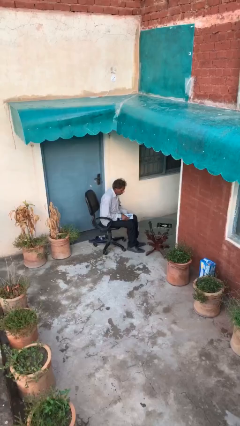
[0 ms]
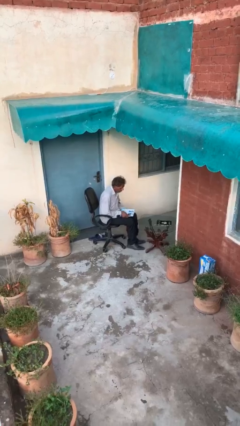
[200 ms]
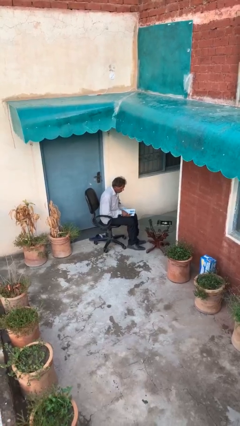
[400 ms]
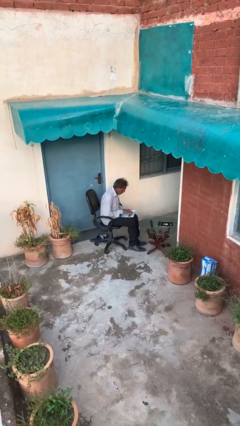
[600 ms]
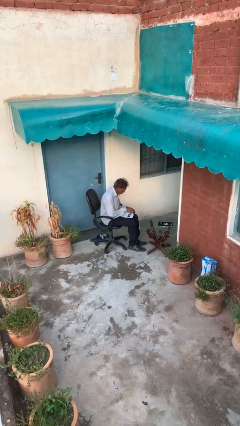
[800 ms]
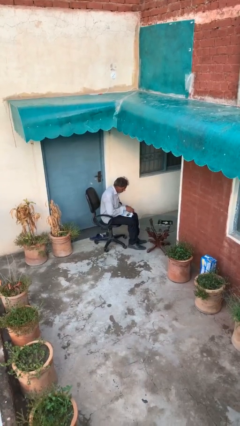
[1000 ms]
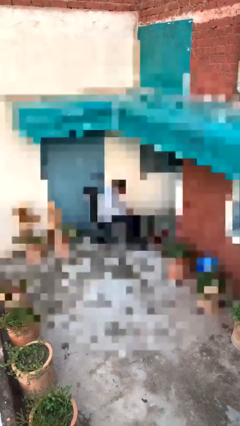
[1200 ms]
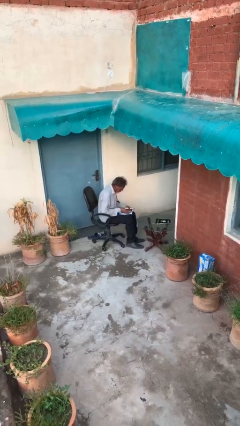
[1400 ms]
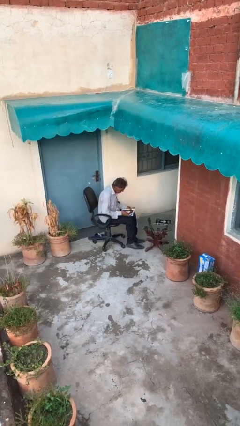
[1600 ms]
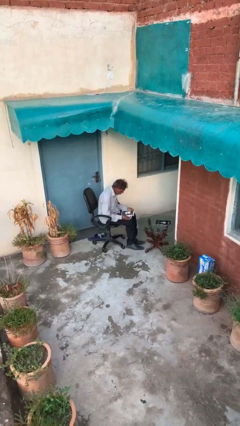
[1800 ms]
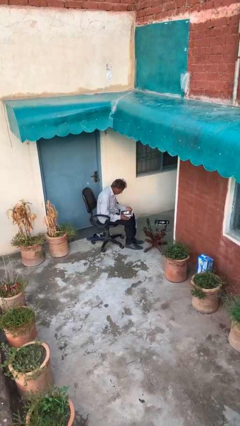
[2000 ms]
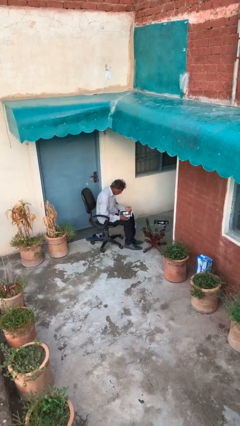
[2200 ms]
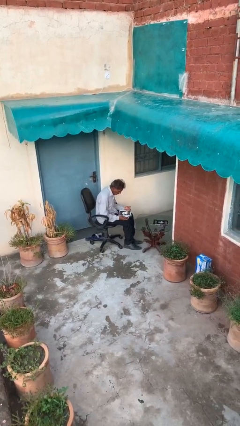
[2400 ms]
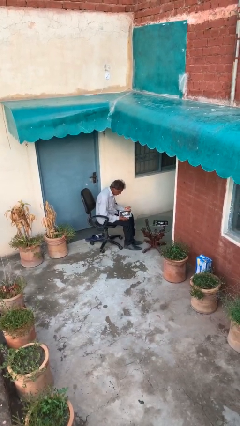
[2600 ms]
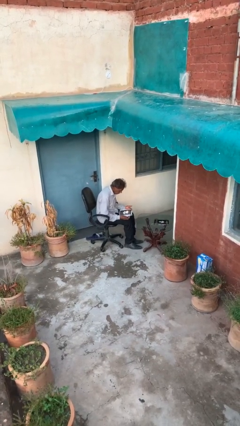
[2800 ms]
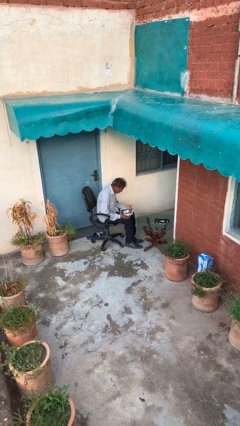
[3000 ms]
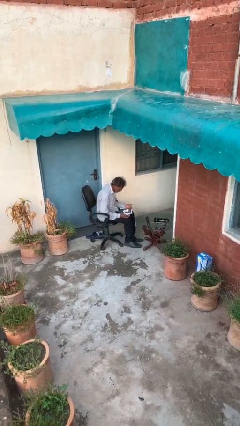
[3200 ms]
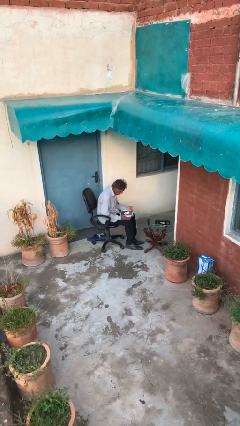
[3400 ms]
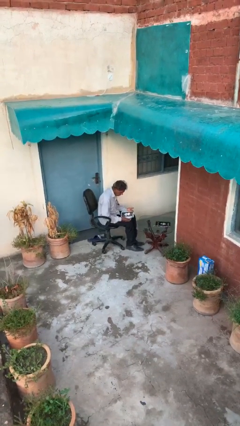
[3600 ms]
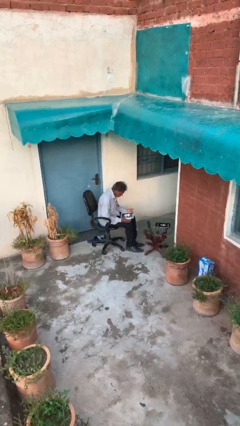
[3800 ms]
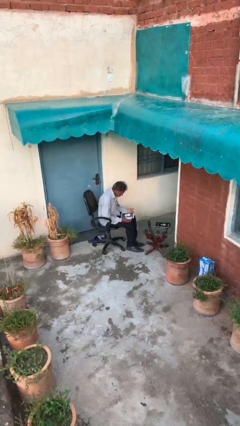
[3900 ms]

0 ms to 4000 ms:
person reads document

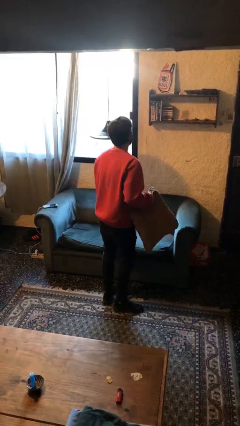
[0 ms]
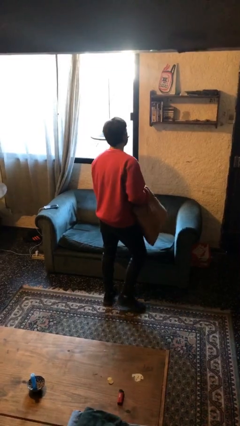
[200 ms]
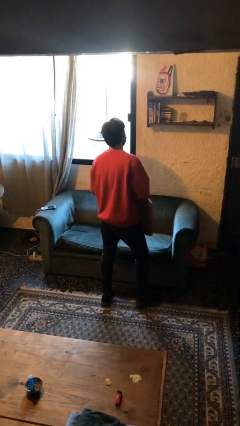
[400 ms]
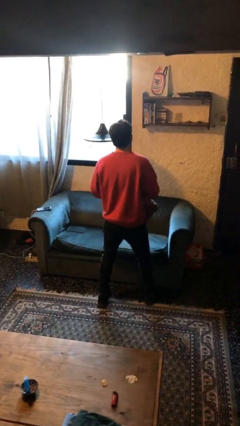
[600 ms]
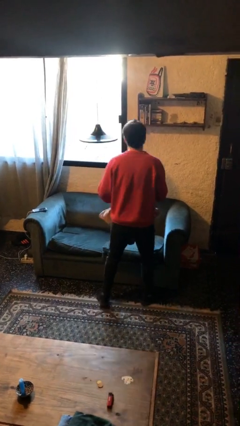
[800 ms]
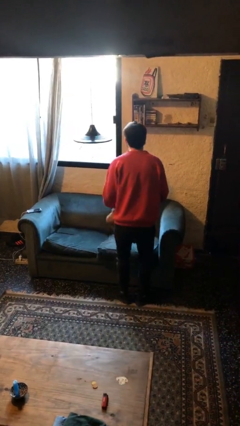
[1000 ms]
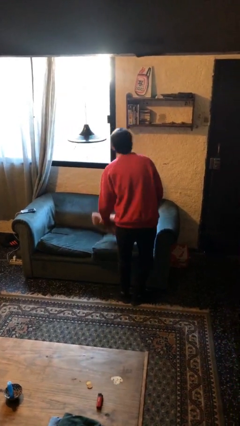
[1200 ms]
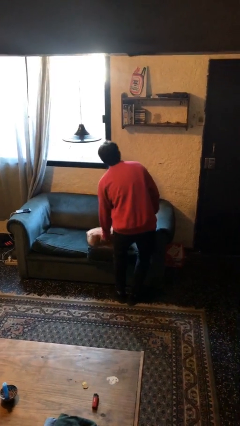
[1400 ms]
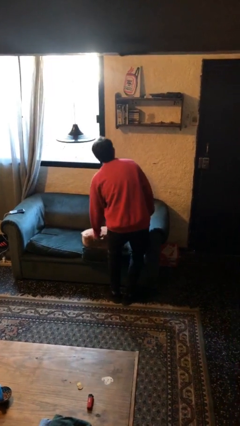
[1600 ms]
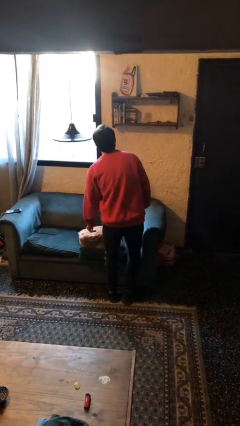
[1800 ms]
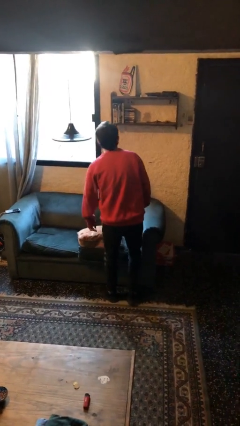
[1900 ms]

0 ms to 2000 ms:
person puts down object on couch

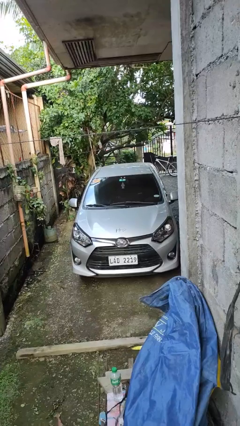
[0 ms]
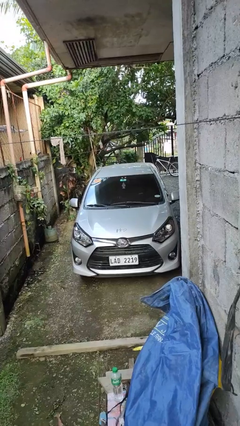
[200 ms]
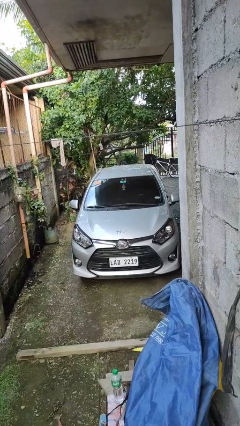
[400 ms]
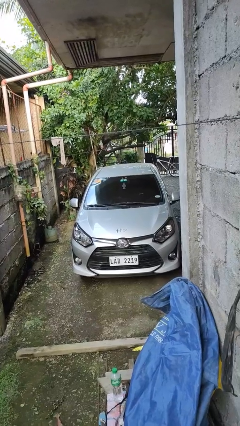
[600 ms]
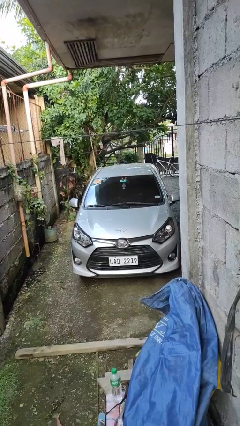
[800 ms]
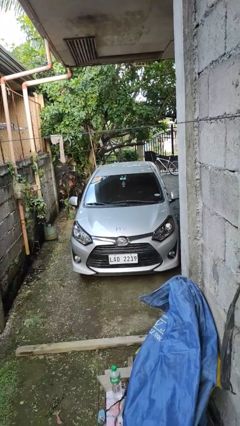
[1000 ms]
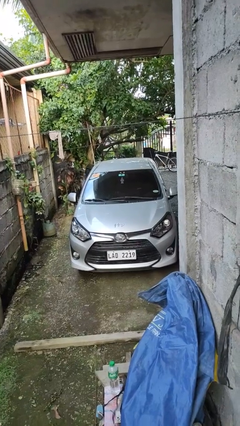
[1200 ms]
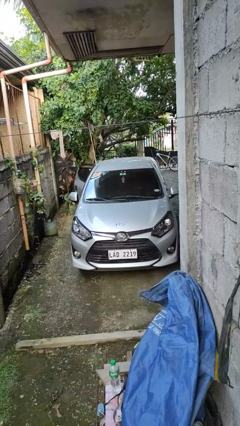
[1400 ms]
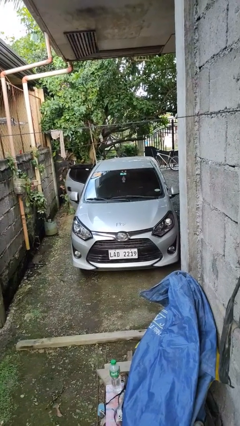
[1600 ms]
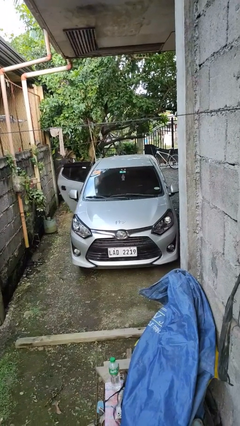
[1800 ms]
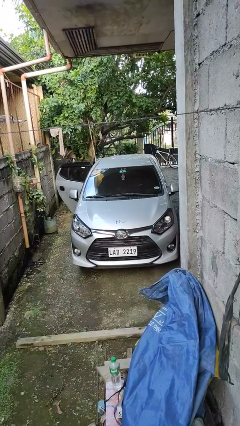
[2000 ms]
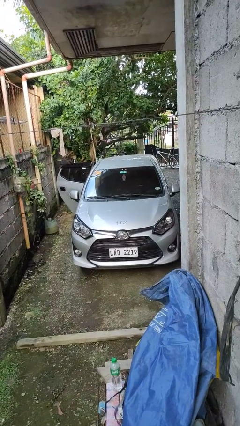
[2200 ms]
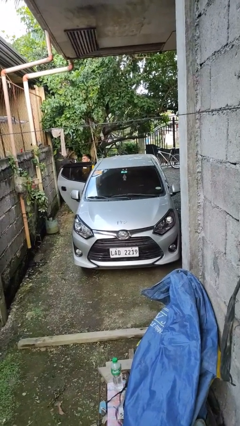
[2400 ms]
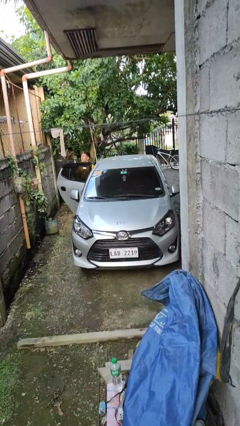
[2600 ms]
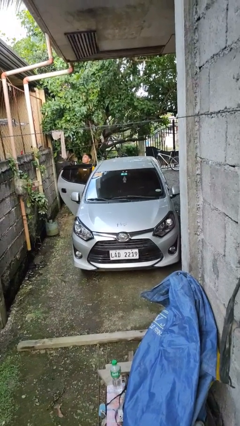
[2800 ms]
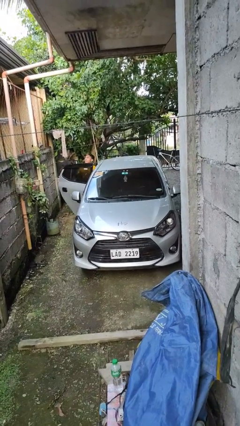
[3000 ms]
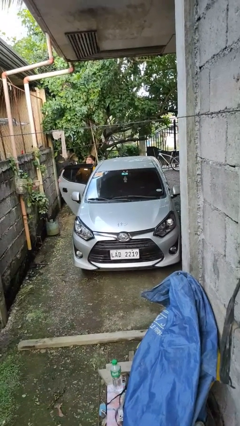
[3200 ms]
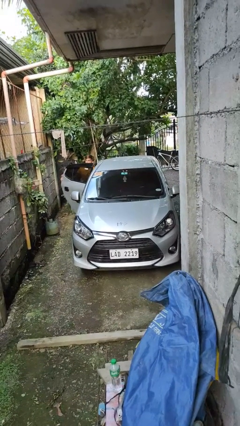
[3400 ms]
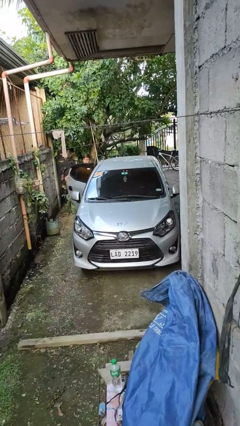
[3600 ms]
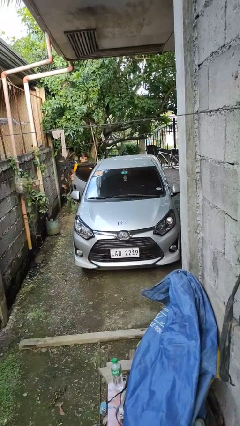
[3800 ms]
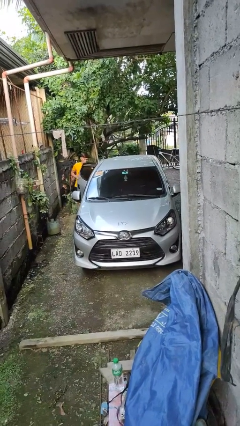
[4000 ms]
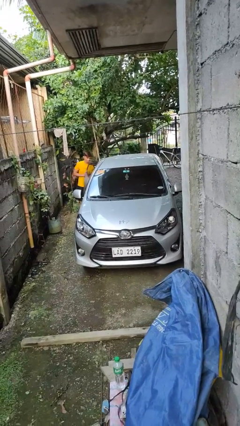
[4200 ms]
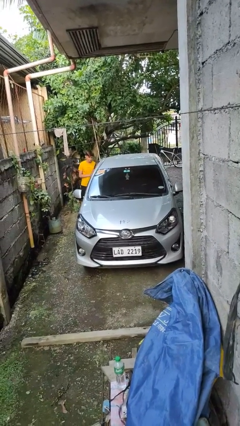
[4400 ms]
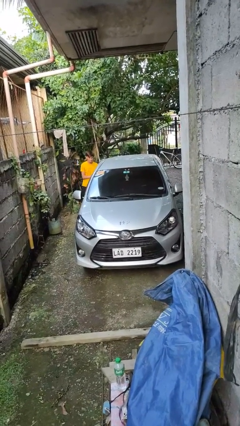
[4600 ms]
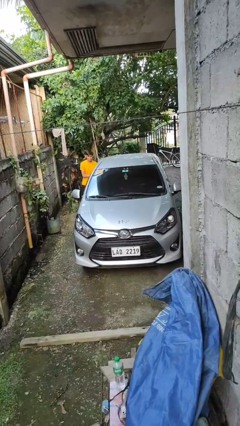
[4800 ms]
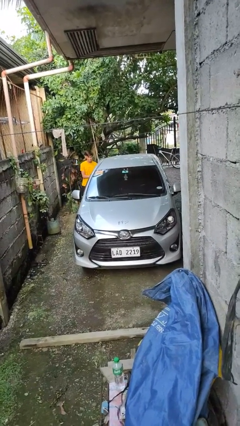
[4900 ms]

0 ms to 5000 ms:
car drops off person

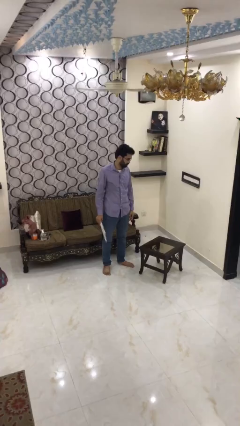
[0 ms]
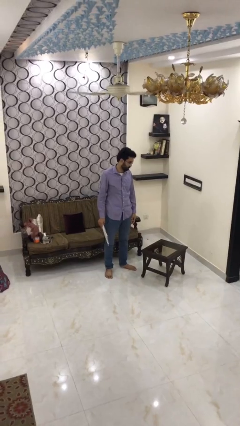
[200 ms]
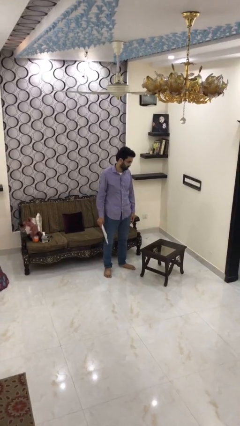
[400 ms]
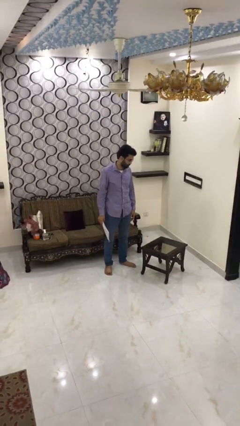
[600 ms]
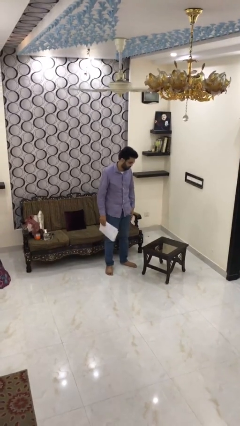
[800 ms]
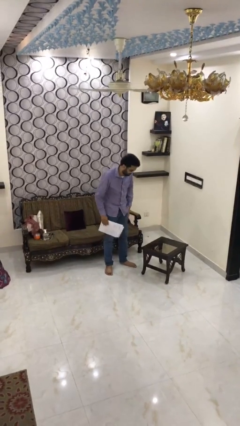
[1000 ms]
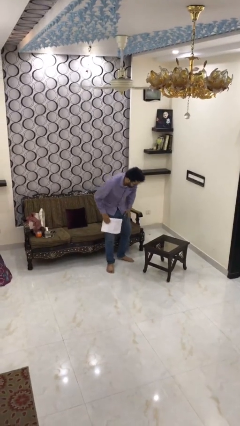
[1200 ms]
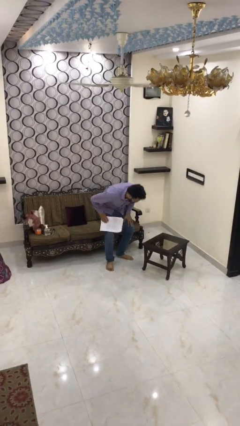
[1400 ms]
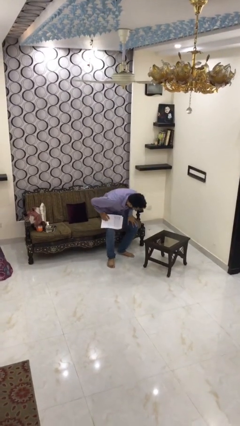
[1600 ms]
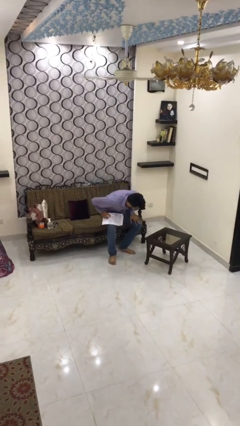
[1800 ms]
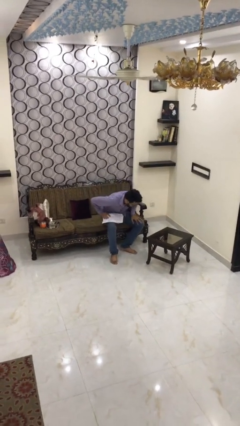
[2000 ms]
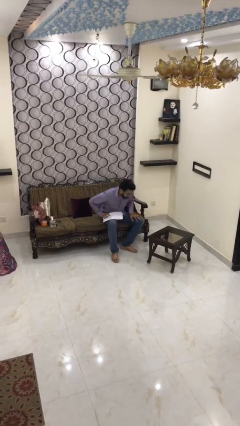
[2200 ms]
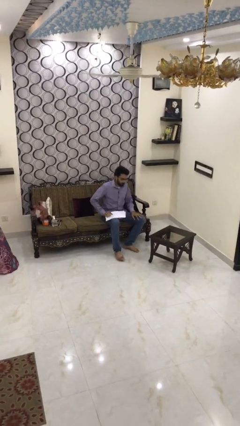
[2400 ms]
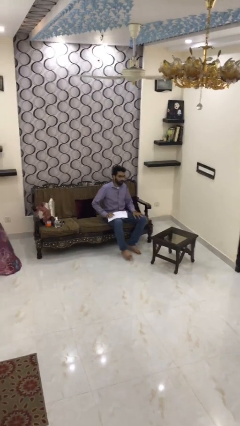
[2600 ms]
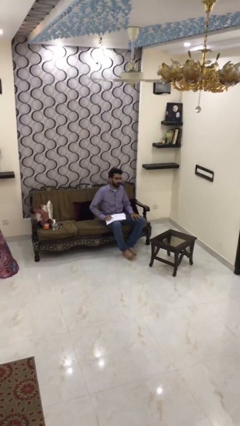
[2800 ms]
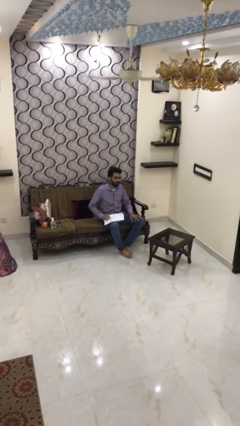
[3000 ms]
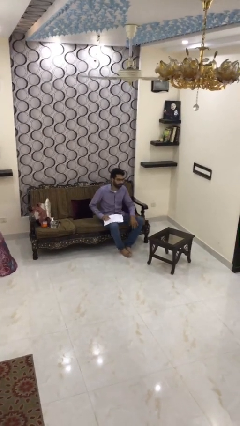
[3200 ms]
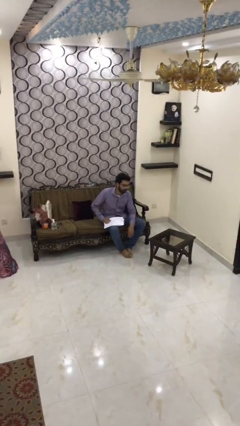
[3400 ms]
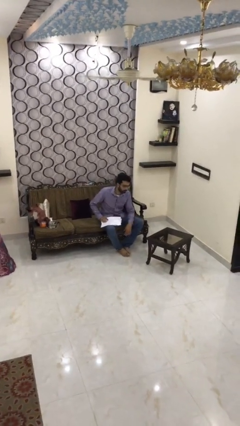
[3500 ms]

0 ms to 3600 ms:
person sits down

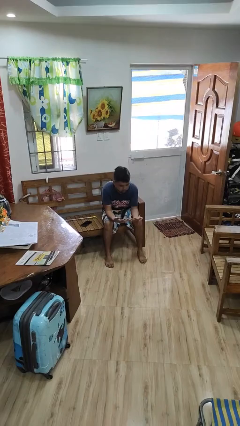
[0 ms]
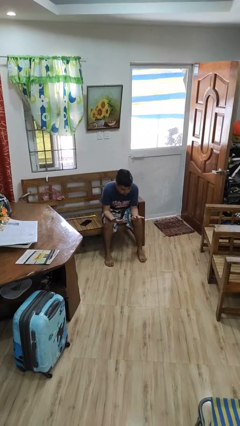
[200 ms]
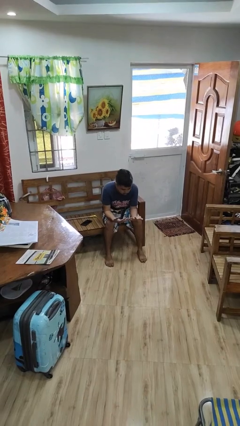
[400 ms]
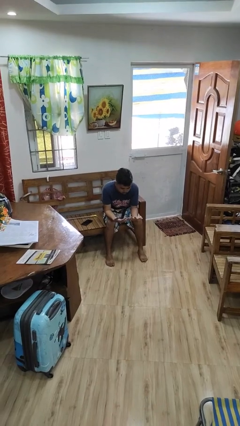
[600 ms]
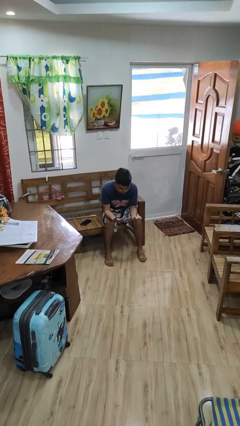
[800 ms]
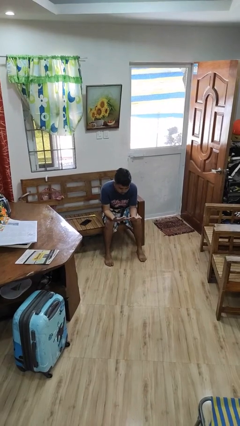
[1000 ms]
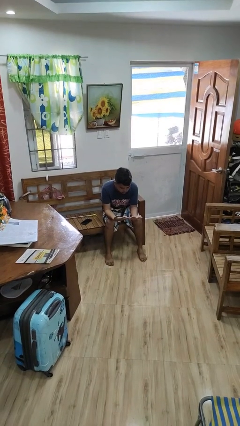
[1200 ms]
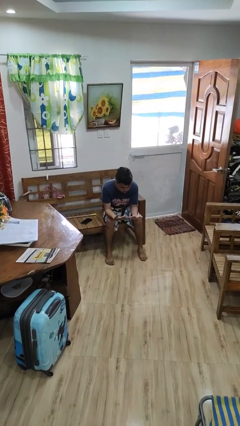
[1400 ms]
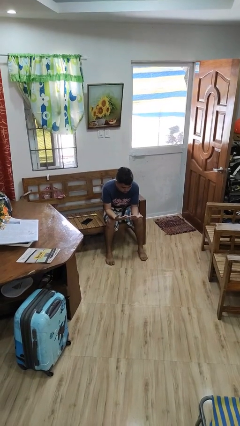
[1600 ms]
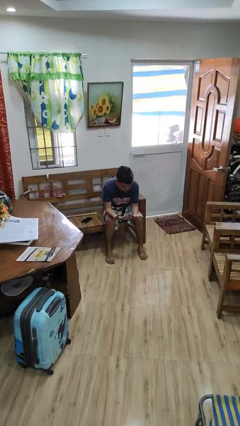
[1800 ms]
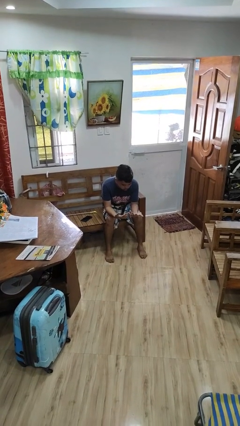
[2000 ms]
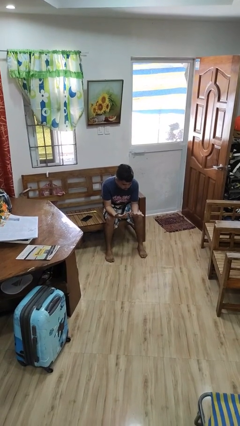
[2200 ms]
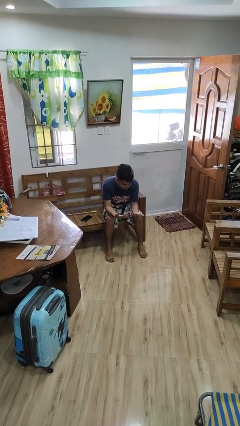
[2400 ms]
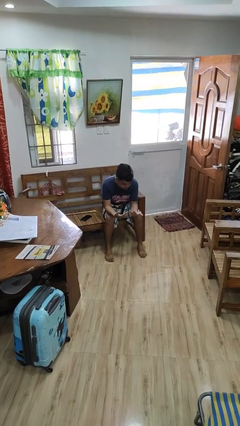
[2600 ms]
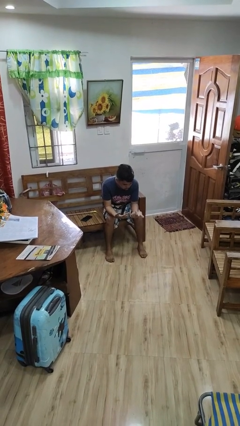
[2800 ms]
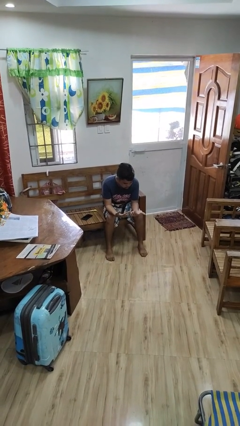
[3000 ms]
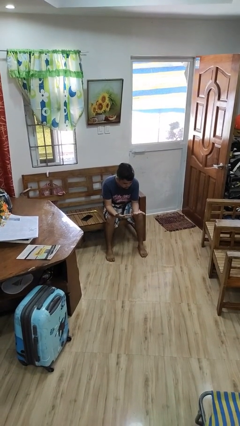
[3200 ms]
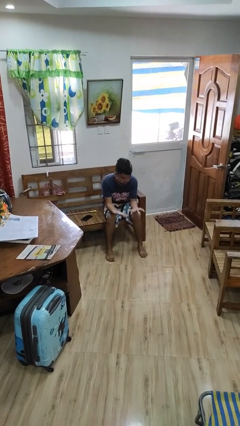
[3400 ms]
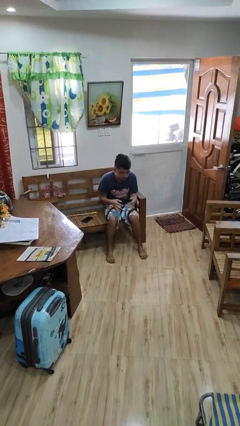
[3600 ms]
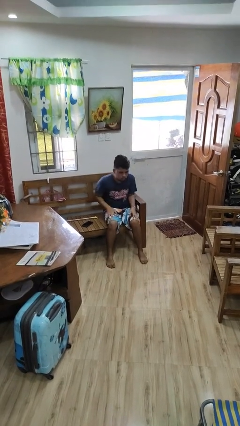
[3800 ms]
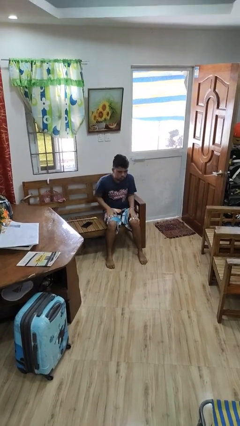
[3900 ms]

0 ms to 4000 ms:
person looks at hands in lap
